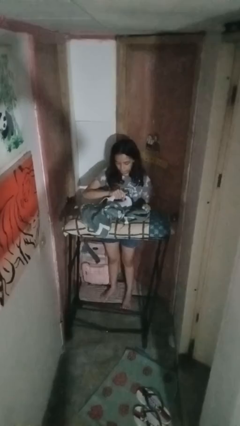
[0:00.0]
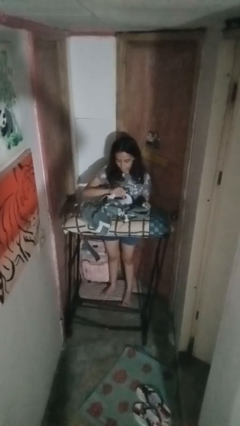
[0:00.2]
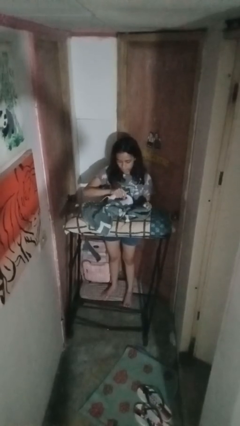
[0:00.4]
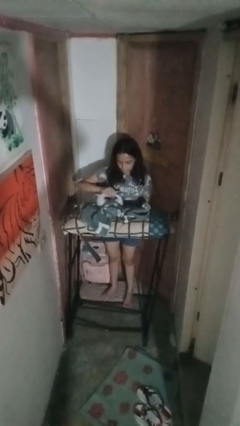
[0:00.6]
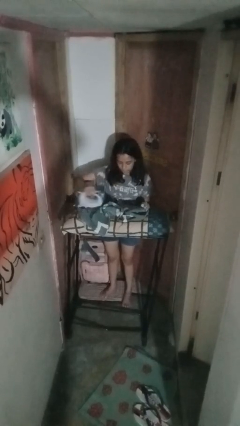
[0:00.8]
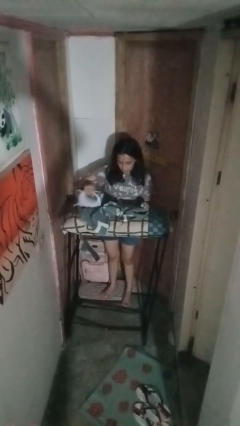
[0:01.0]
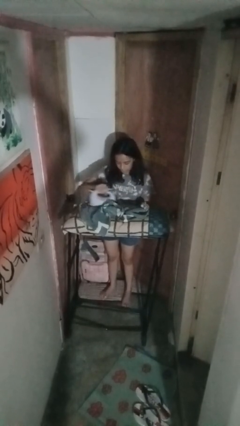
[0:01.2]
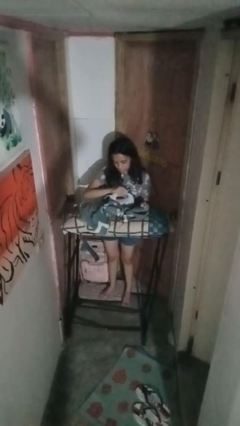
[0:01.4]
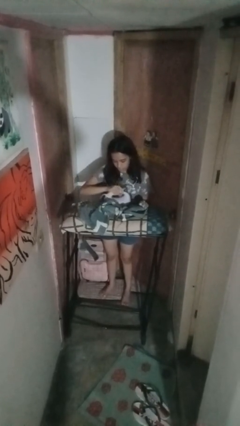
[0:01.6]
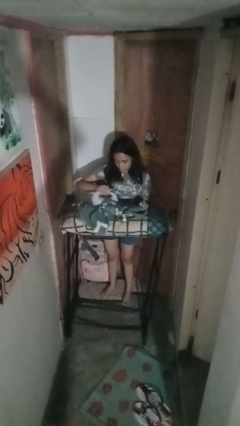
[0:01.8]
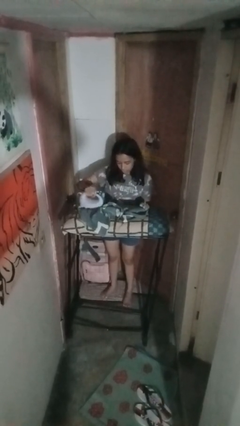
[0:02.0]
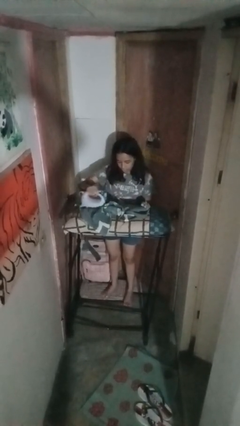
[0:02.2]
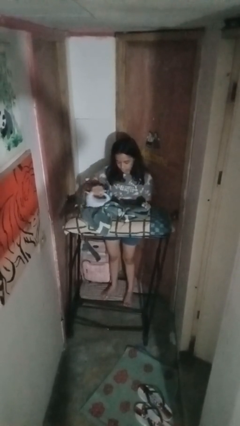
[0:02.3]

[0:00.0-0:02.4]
person irons clothes

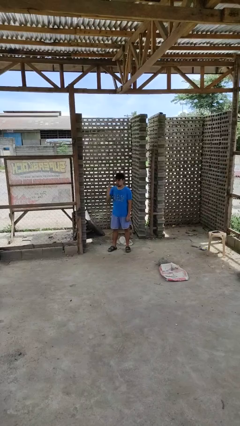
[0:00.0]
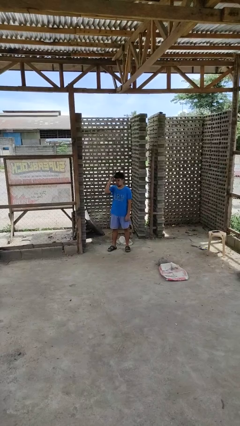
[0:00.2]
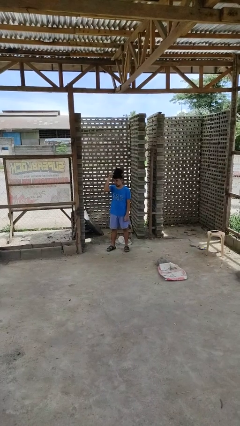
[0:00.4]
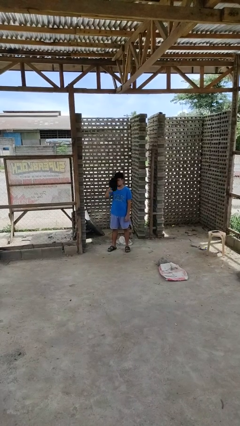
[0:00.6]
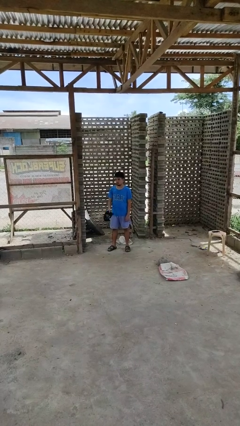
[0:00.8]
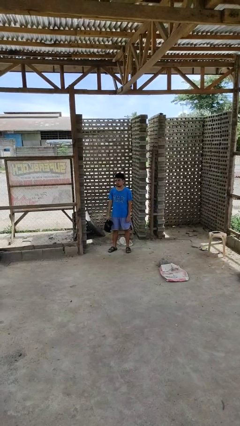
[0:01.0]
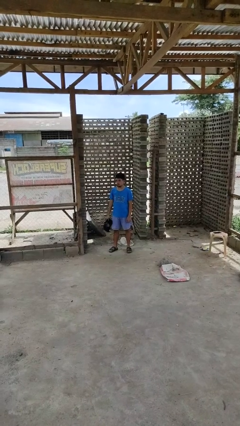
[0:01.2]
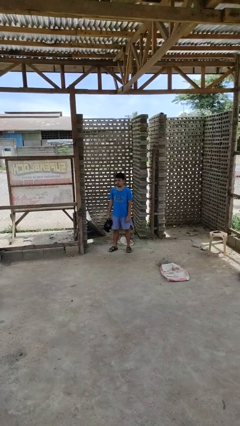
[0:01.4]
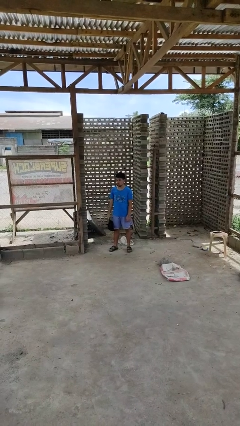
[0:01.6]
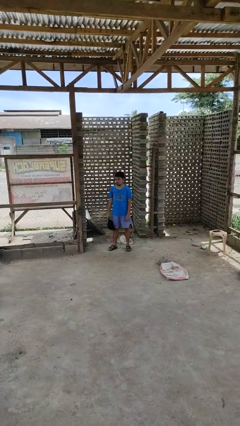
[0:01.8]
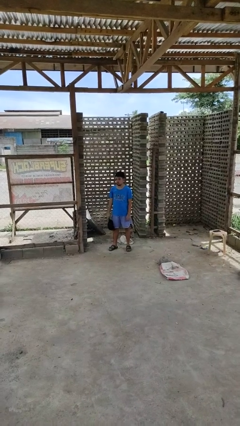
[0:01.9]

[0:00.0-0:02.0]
person takes off hat

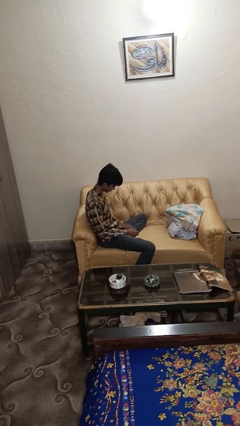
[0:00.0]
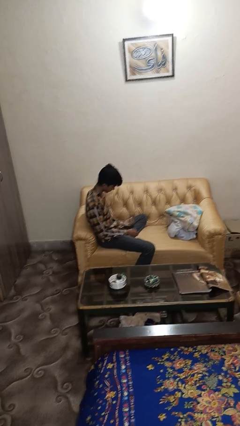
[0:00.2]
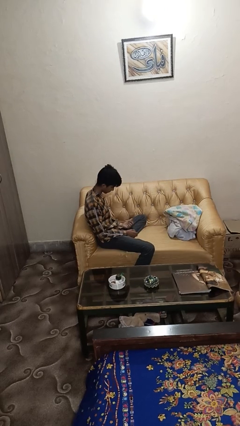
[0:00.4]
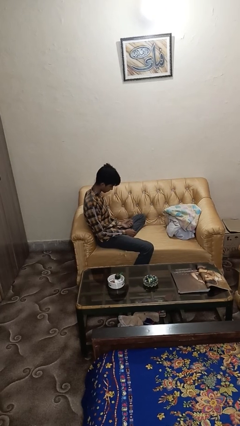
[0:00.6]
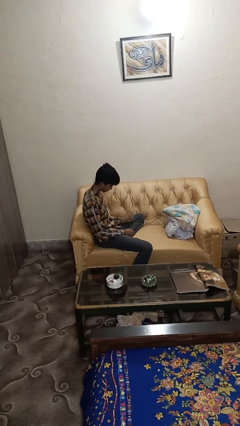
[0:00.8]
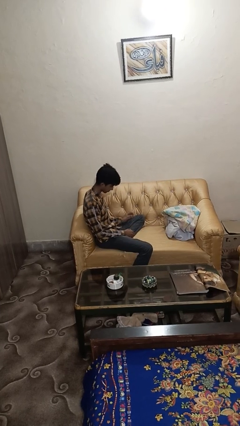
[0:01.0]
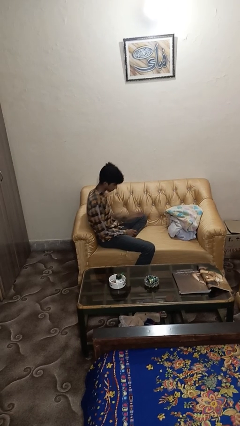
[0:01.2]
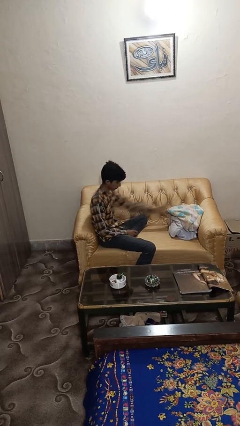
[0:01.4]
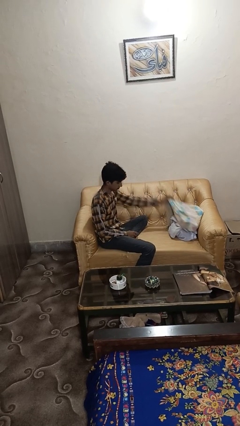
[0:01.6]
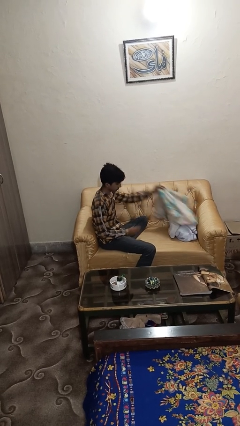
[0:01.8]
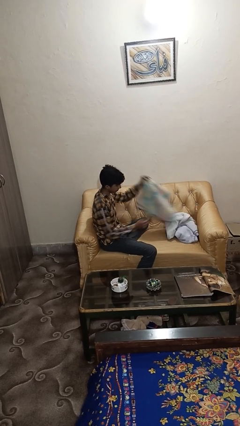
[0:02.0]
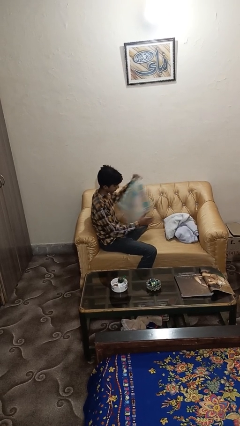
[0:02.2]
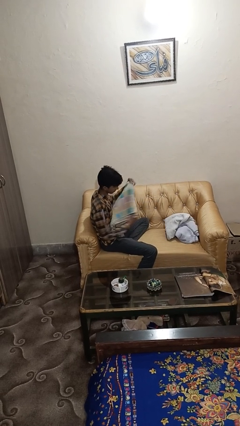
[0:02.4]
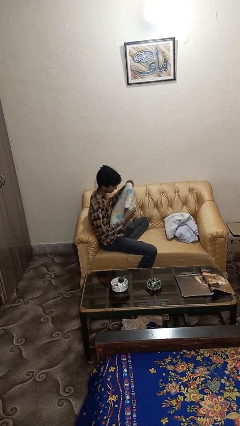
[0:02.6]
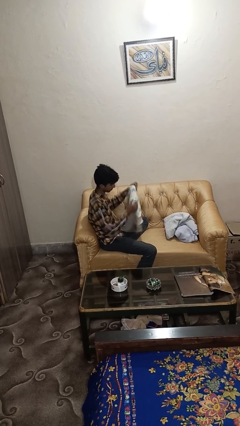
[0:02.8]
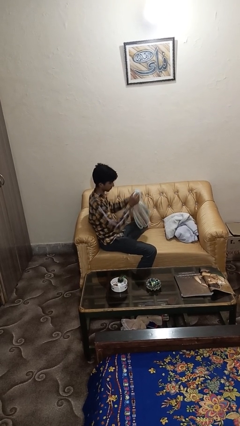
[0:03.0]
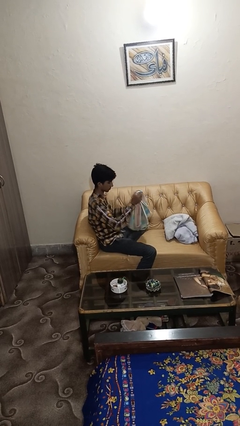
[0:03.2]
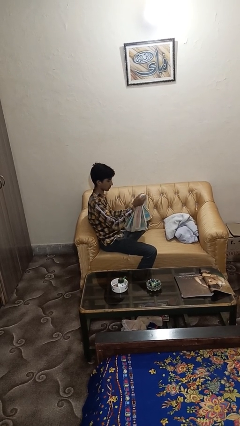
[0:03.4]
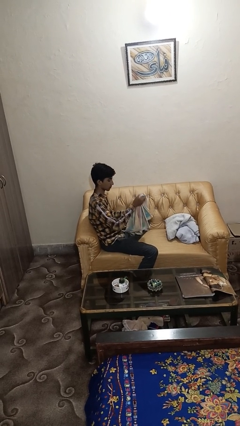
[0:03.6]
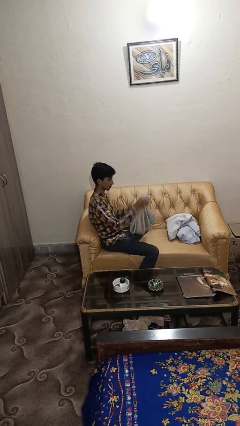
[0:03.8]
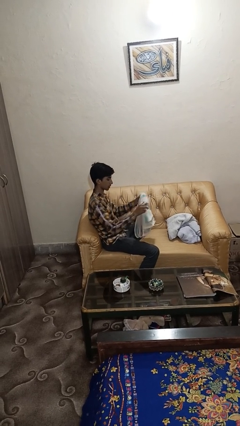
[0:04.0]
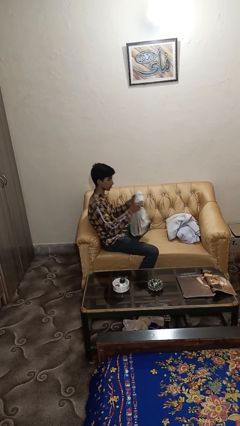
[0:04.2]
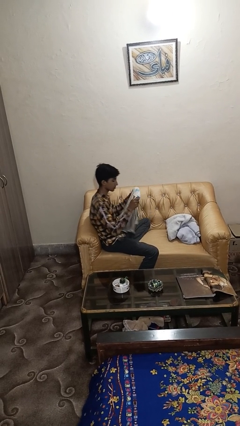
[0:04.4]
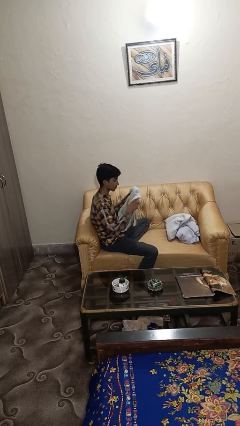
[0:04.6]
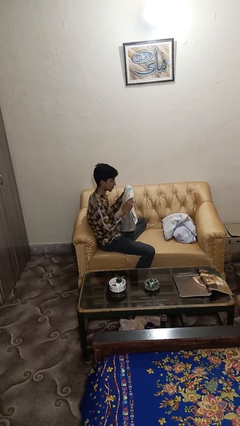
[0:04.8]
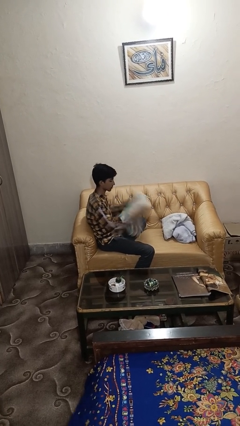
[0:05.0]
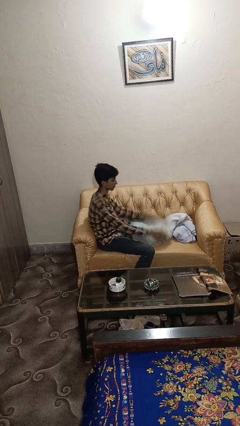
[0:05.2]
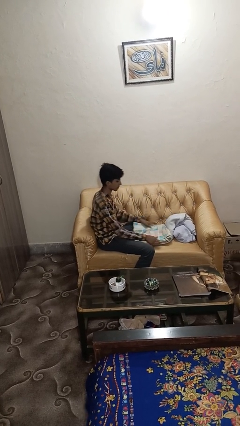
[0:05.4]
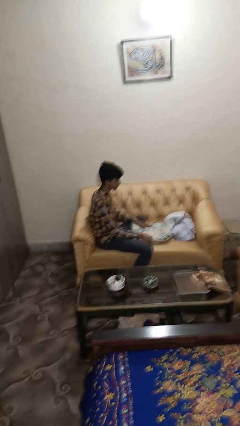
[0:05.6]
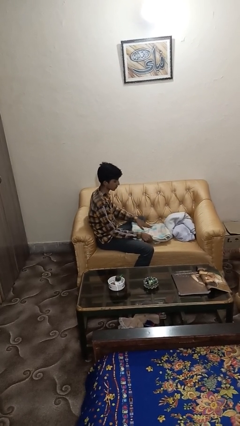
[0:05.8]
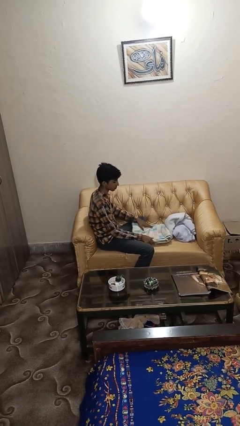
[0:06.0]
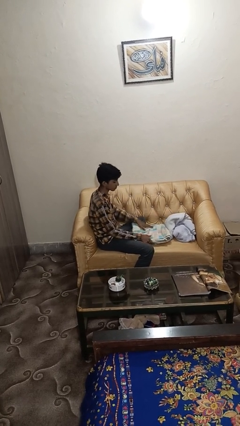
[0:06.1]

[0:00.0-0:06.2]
person folds towel

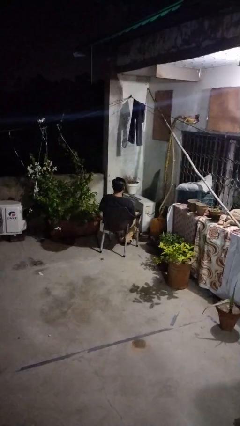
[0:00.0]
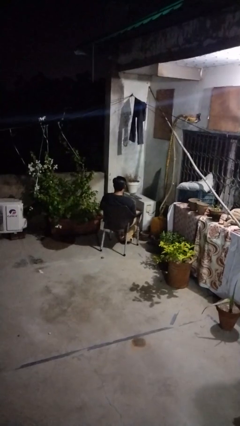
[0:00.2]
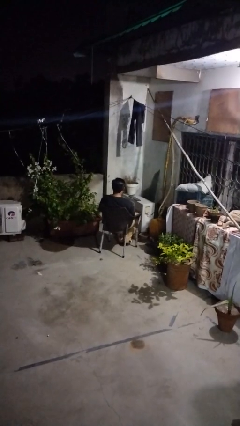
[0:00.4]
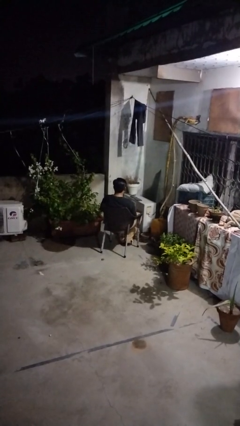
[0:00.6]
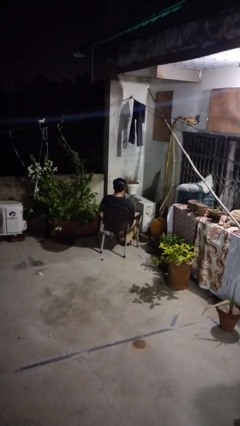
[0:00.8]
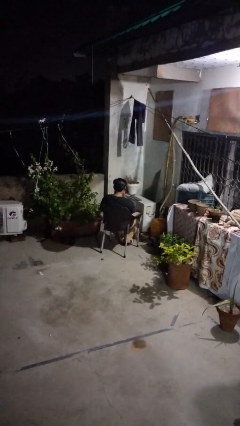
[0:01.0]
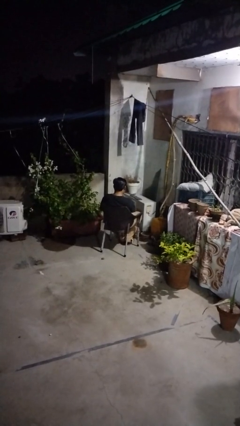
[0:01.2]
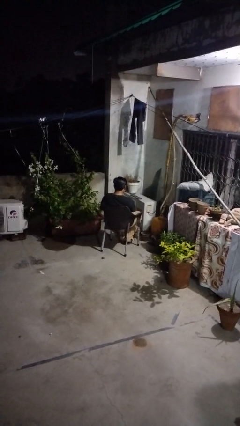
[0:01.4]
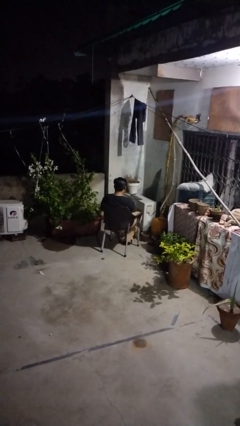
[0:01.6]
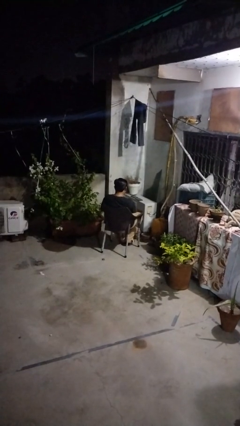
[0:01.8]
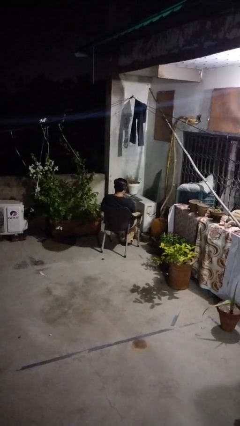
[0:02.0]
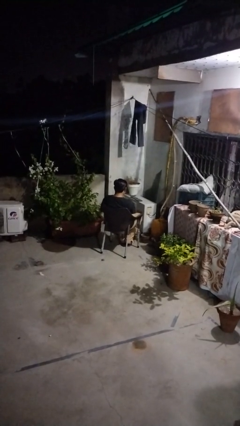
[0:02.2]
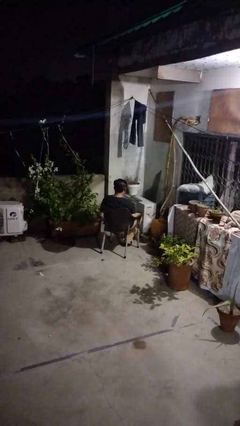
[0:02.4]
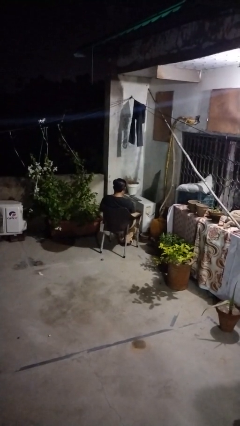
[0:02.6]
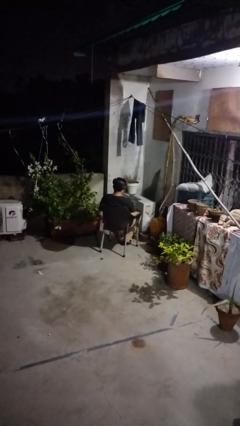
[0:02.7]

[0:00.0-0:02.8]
person blows nose

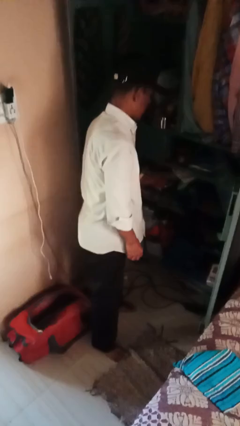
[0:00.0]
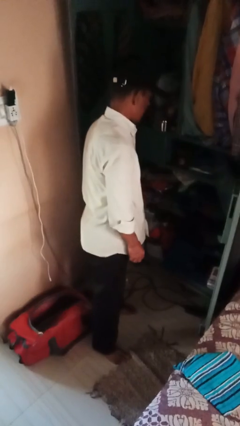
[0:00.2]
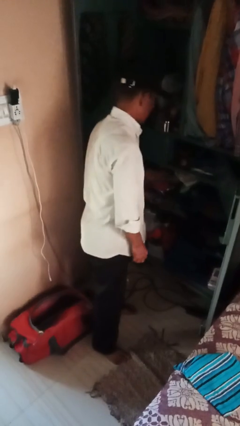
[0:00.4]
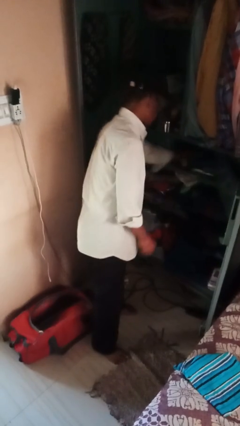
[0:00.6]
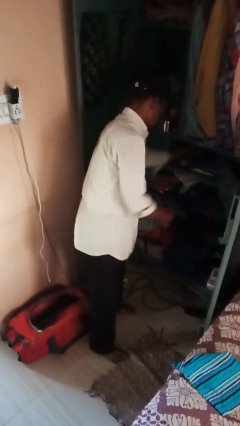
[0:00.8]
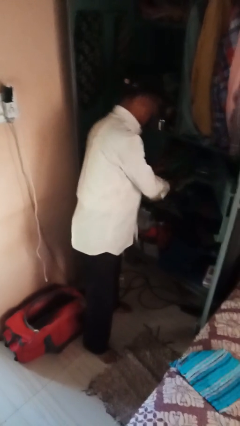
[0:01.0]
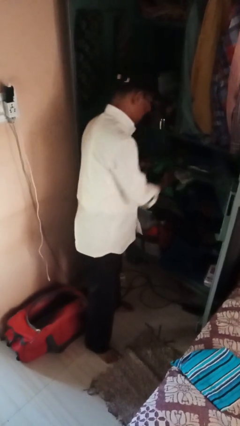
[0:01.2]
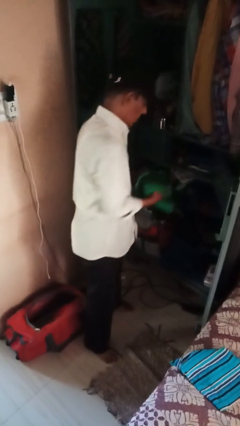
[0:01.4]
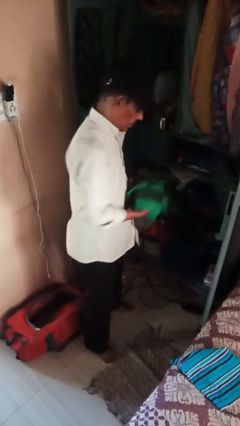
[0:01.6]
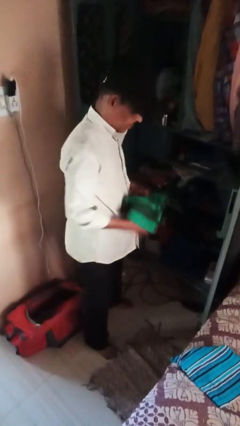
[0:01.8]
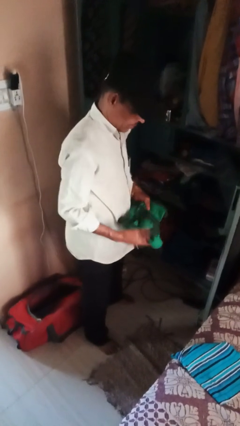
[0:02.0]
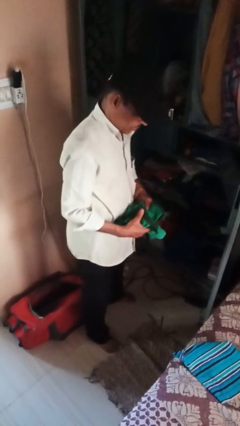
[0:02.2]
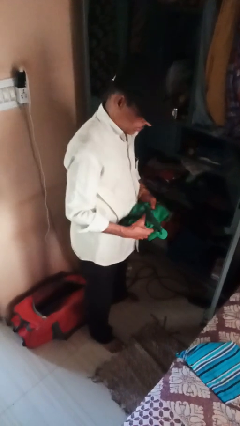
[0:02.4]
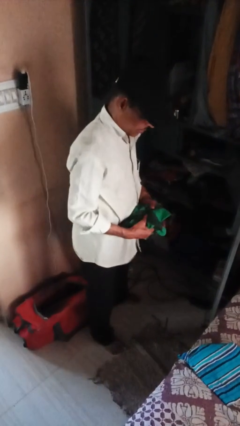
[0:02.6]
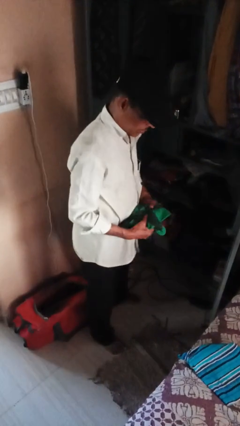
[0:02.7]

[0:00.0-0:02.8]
person takes clothes from dresser

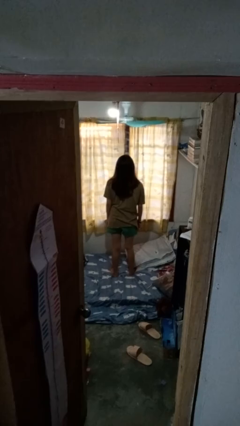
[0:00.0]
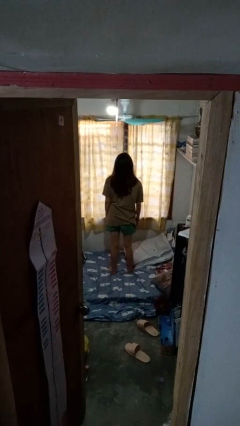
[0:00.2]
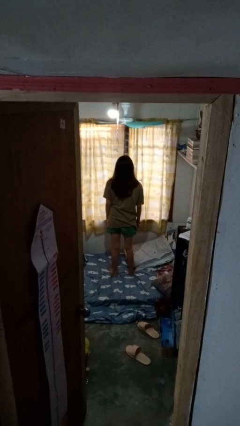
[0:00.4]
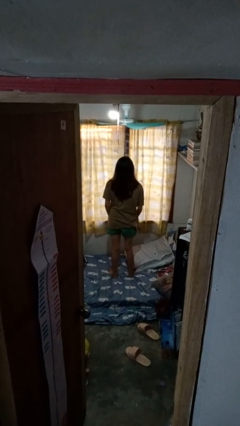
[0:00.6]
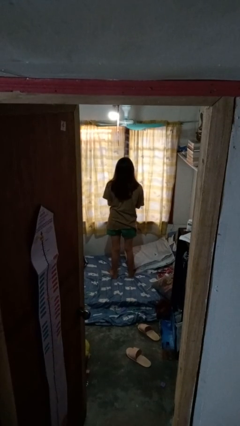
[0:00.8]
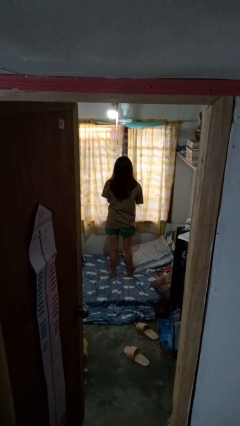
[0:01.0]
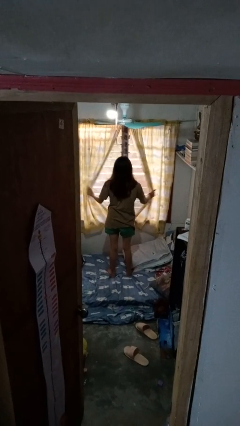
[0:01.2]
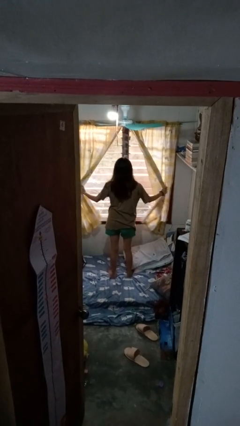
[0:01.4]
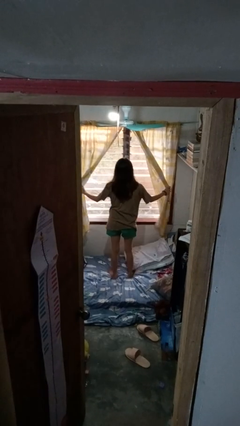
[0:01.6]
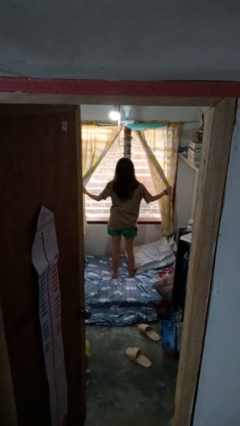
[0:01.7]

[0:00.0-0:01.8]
person opens curtains
